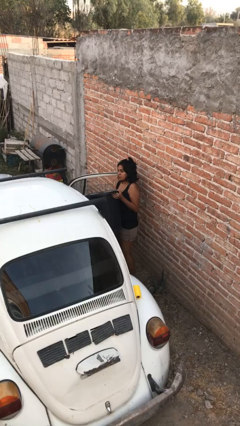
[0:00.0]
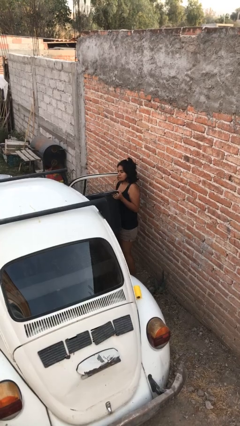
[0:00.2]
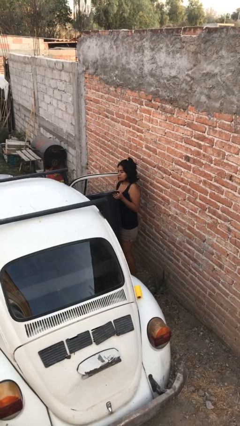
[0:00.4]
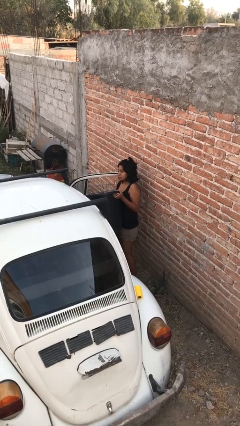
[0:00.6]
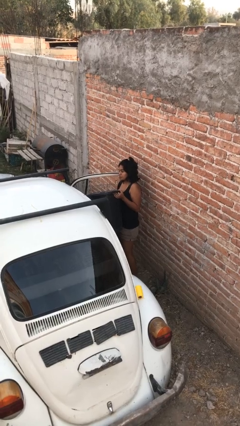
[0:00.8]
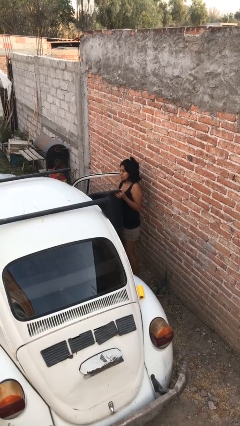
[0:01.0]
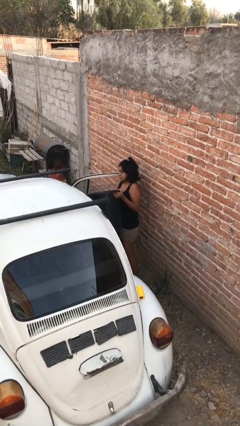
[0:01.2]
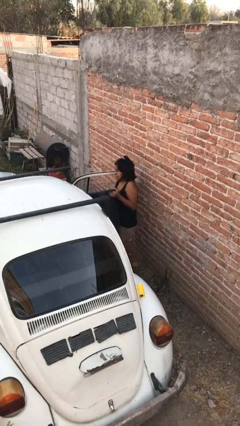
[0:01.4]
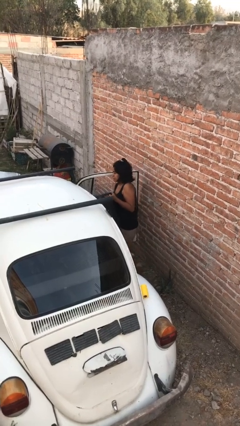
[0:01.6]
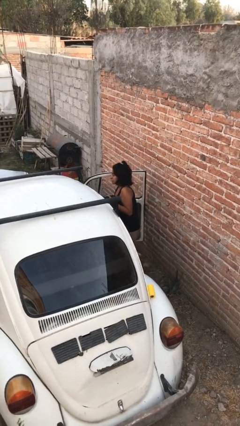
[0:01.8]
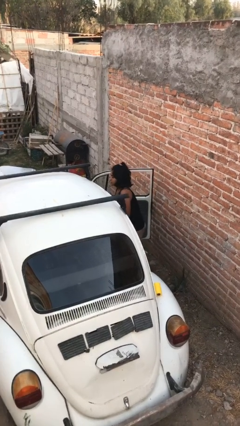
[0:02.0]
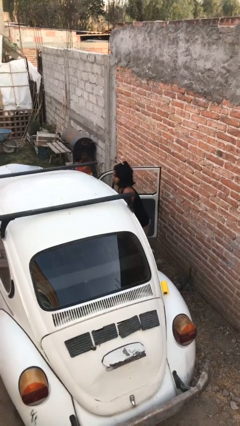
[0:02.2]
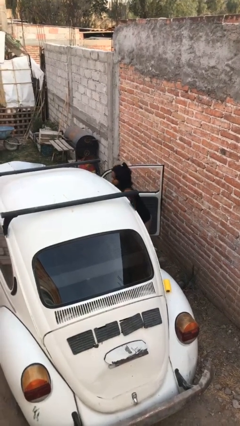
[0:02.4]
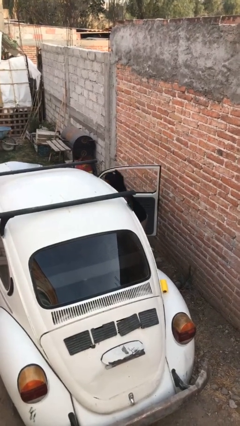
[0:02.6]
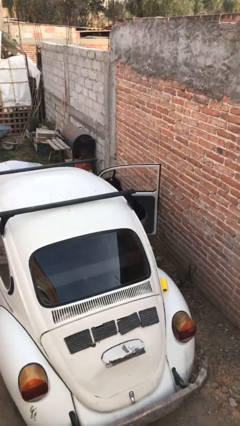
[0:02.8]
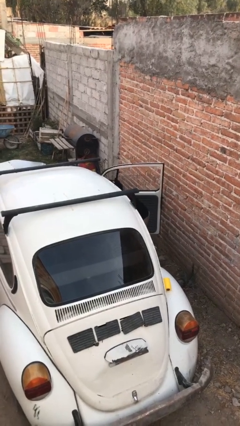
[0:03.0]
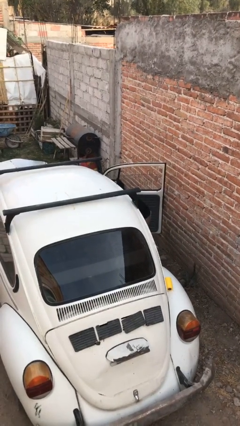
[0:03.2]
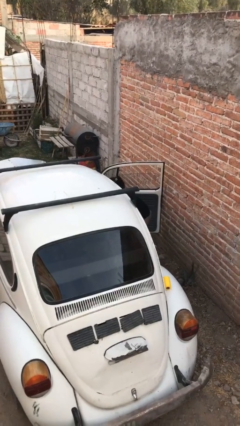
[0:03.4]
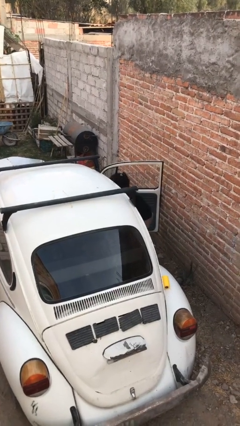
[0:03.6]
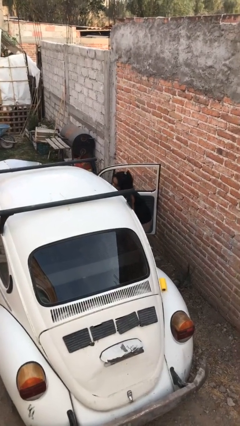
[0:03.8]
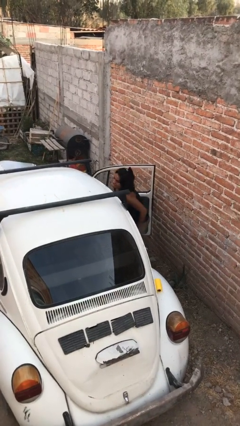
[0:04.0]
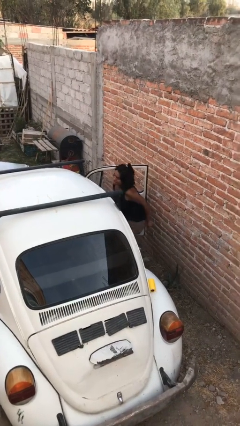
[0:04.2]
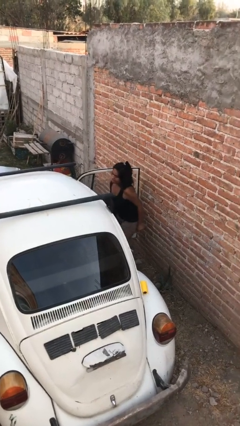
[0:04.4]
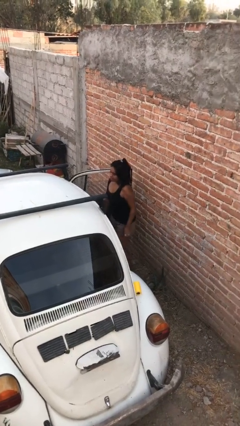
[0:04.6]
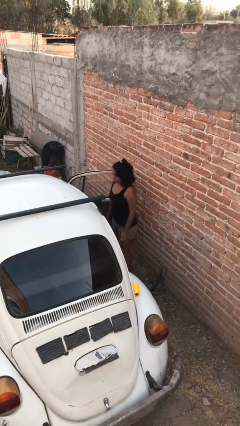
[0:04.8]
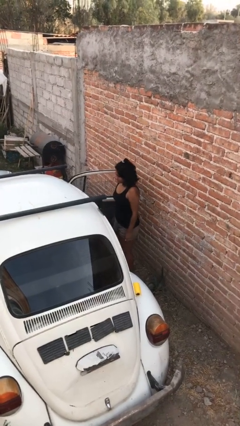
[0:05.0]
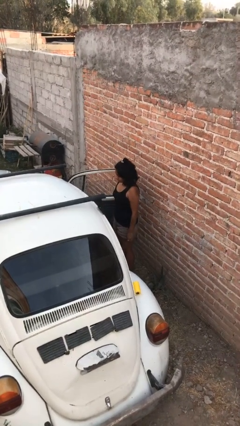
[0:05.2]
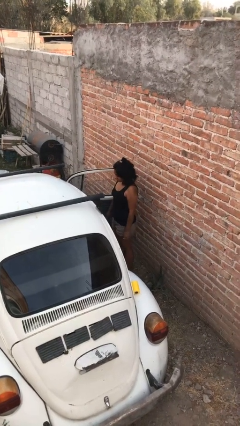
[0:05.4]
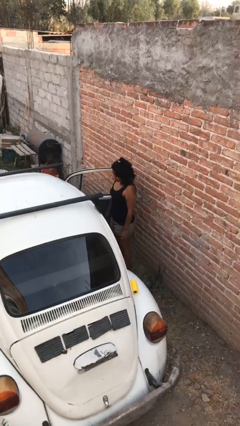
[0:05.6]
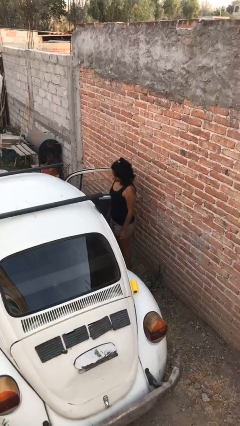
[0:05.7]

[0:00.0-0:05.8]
person loads car

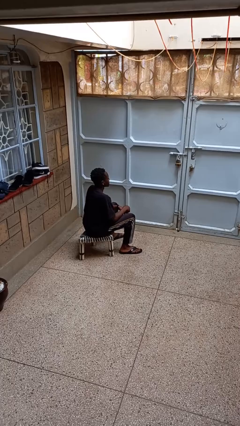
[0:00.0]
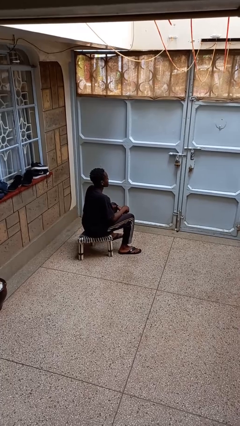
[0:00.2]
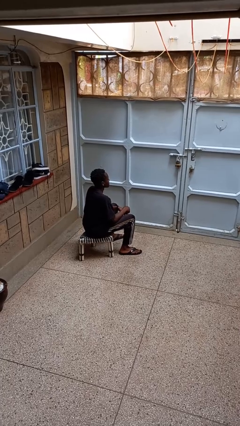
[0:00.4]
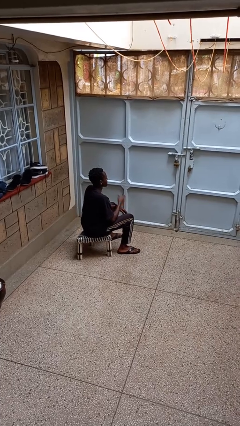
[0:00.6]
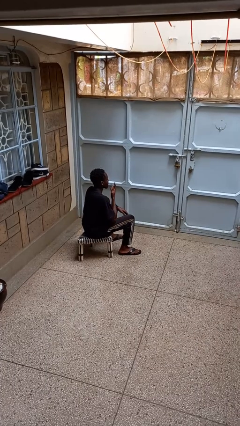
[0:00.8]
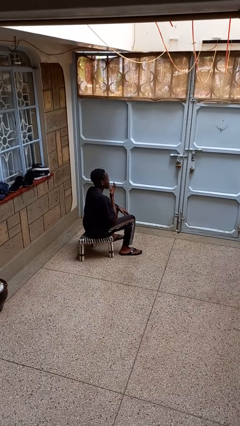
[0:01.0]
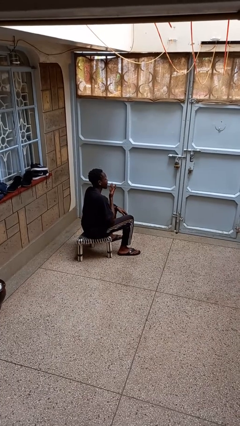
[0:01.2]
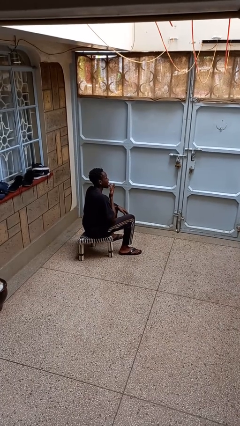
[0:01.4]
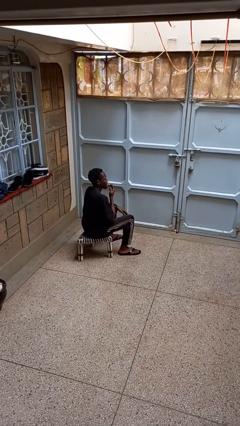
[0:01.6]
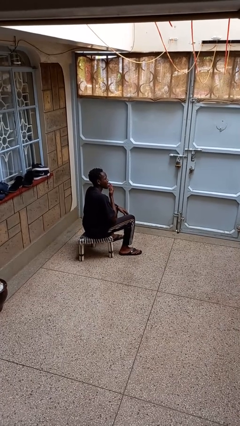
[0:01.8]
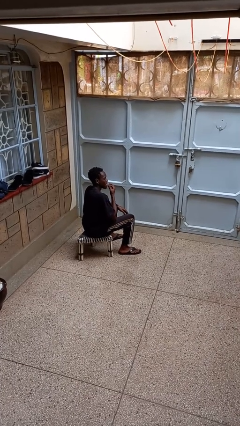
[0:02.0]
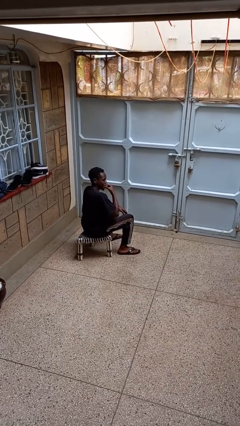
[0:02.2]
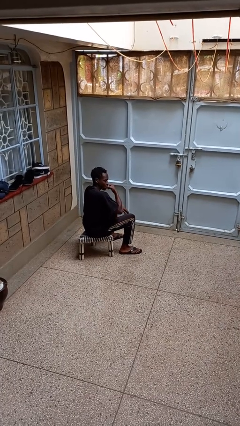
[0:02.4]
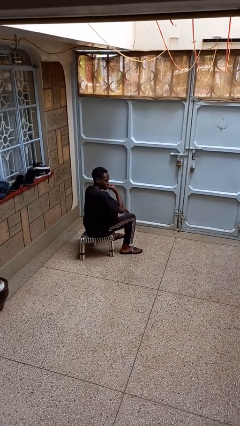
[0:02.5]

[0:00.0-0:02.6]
person licks fingers

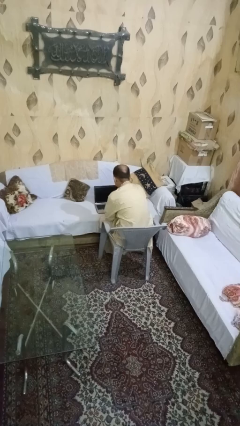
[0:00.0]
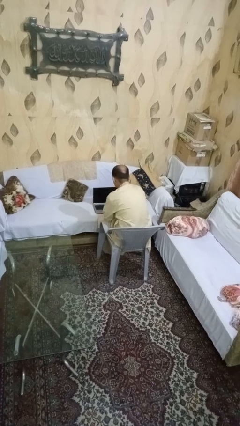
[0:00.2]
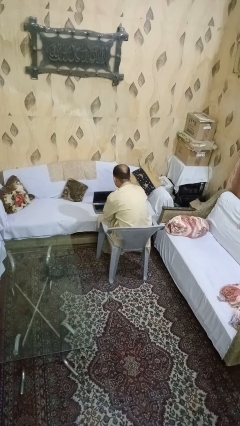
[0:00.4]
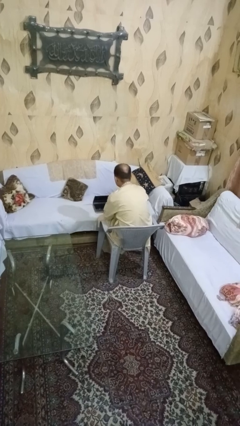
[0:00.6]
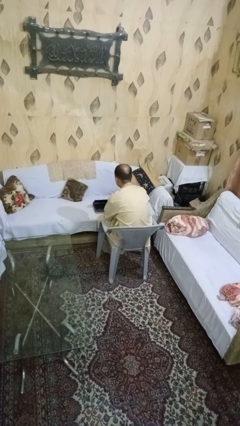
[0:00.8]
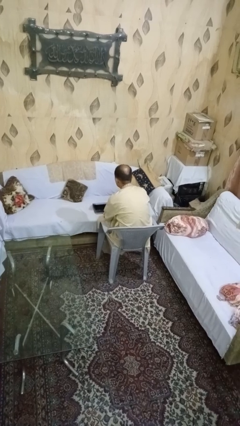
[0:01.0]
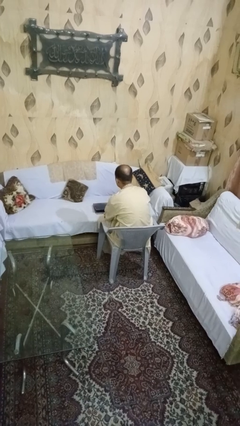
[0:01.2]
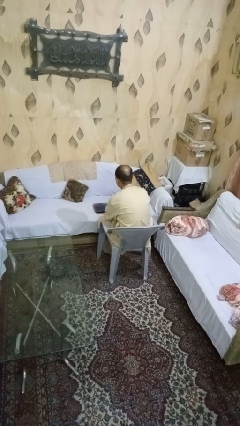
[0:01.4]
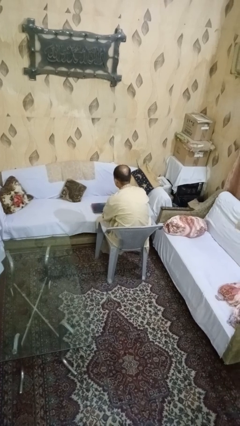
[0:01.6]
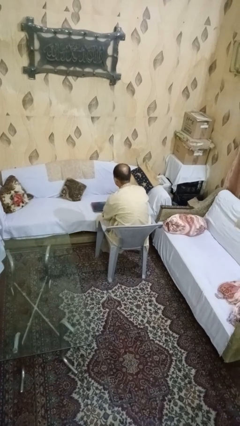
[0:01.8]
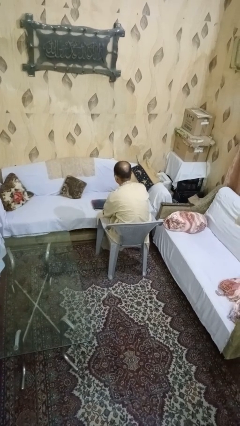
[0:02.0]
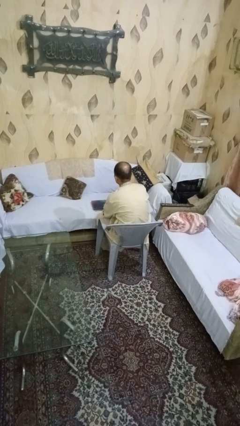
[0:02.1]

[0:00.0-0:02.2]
person closes laptop

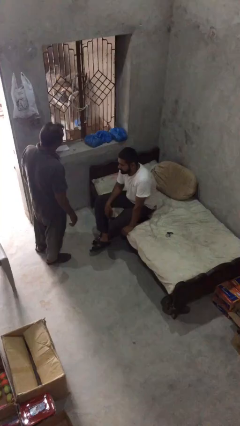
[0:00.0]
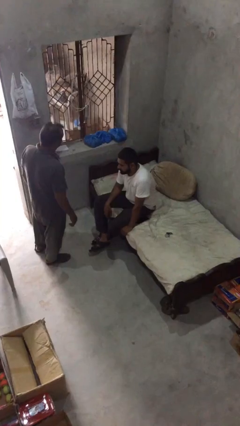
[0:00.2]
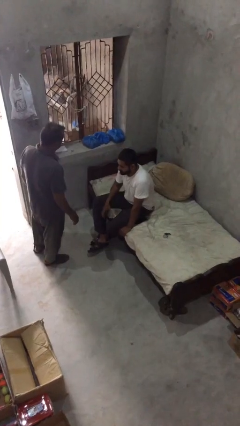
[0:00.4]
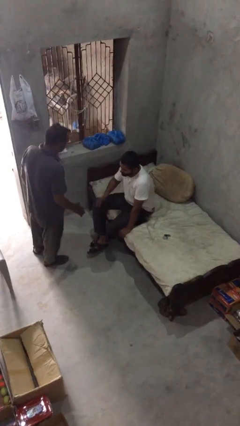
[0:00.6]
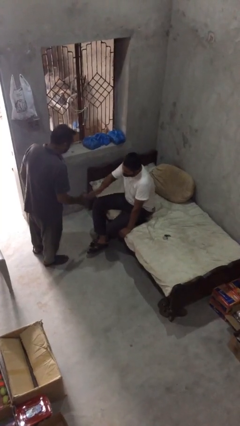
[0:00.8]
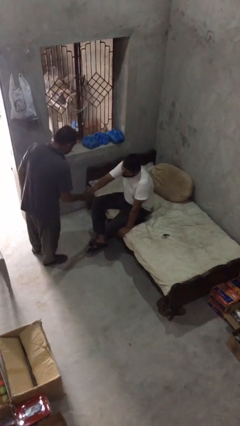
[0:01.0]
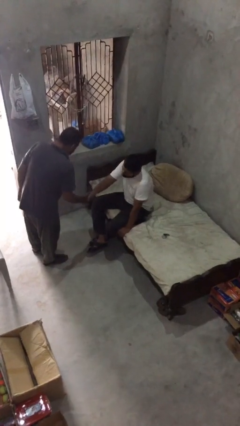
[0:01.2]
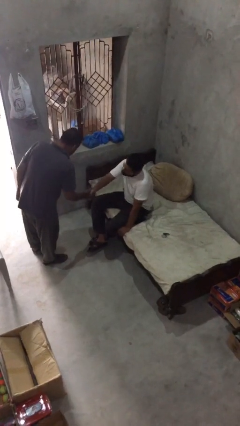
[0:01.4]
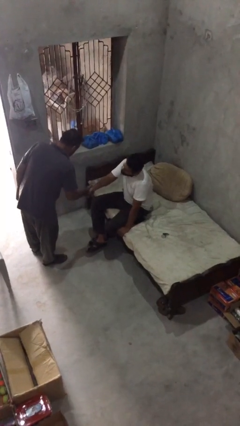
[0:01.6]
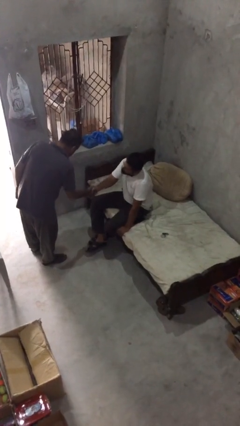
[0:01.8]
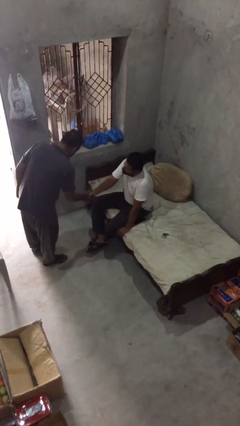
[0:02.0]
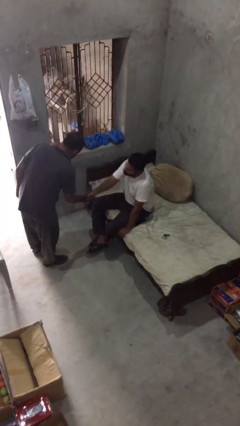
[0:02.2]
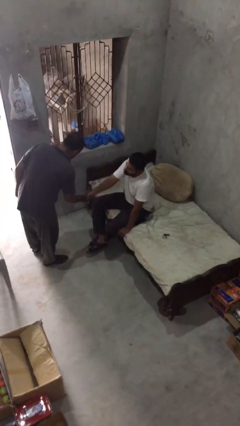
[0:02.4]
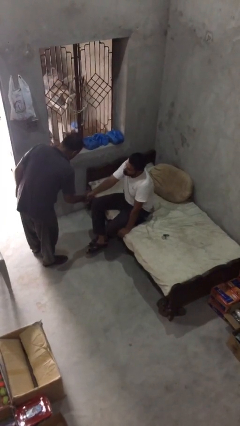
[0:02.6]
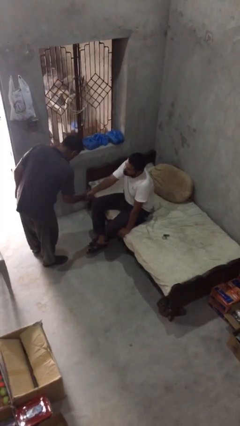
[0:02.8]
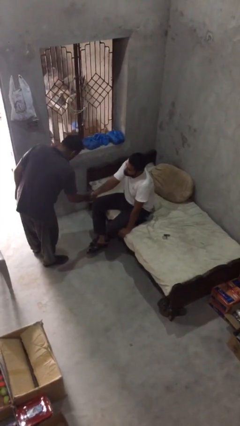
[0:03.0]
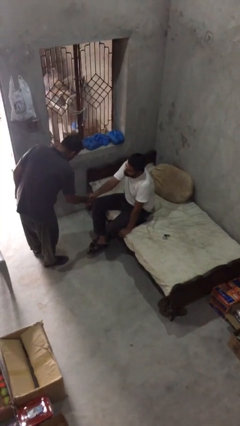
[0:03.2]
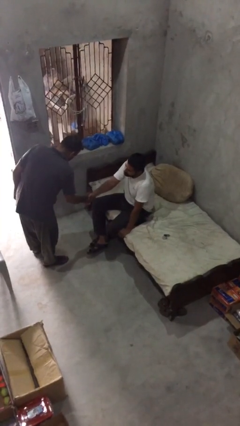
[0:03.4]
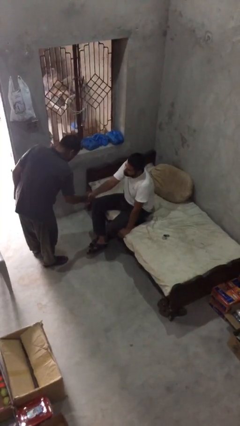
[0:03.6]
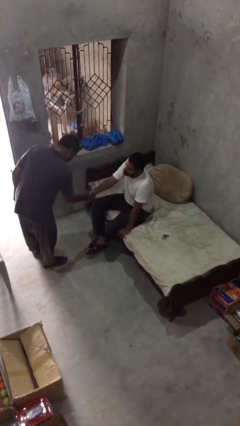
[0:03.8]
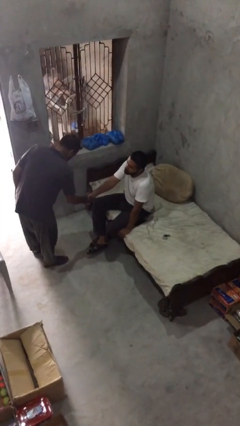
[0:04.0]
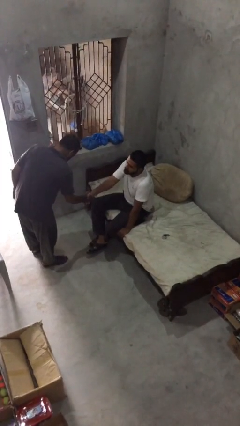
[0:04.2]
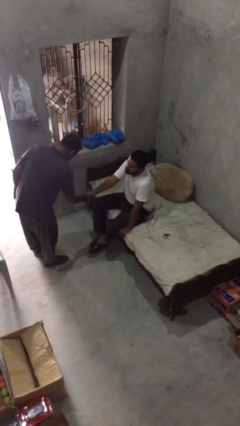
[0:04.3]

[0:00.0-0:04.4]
person shakes hand

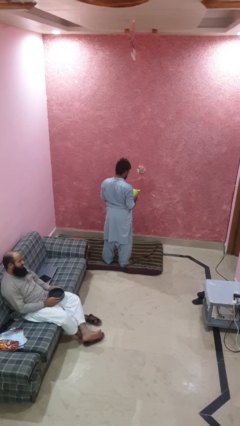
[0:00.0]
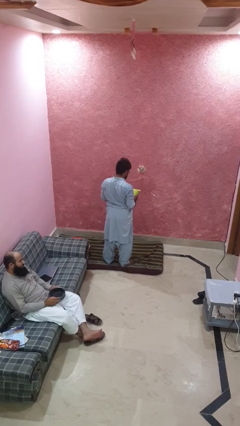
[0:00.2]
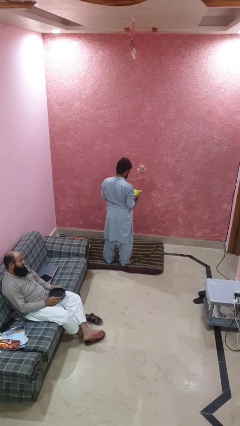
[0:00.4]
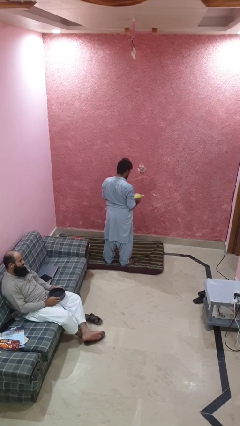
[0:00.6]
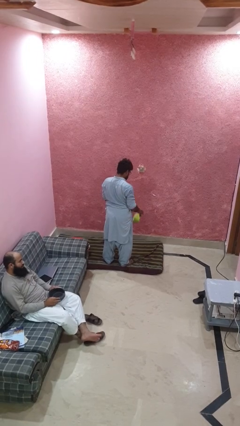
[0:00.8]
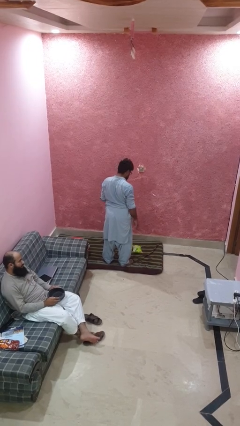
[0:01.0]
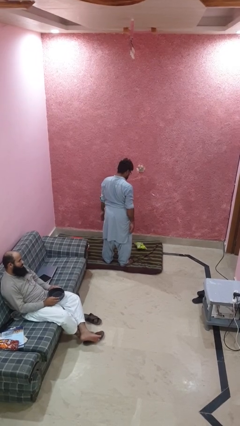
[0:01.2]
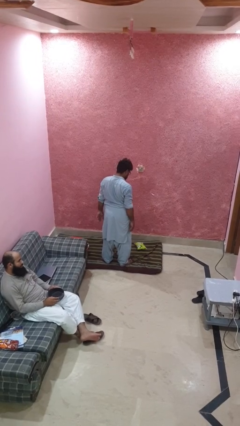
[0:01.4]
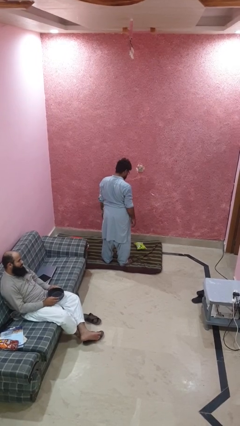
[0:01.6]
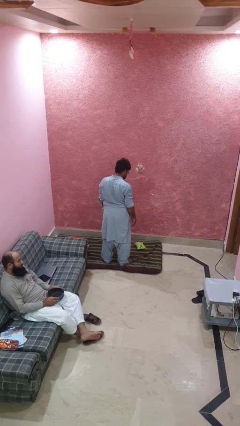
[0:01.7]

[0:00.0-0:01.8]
person drops object

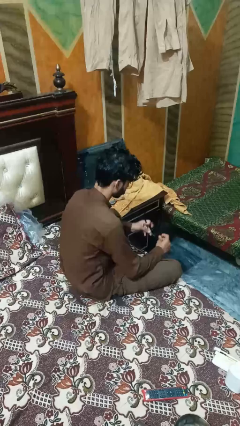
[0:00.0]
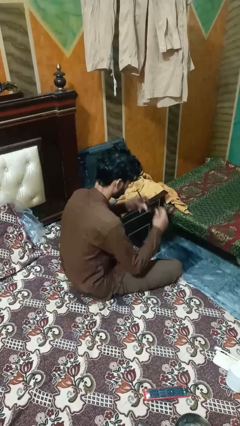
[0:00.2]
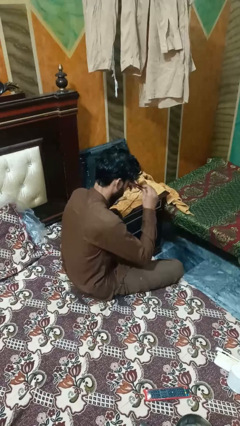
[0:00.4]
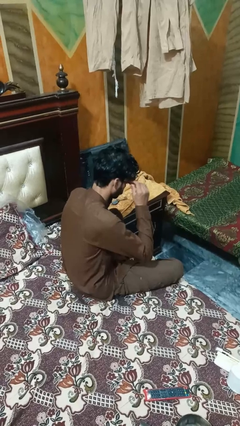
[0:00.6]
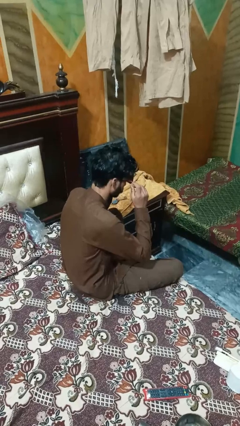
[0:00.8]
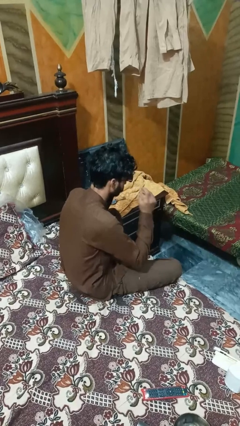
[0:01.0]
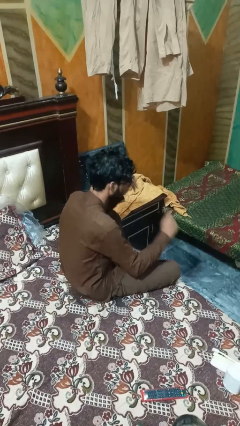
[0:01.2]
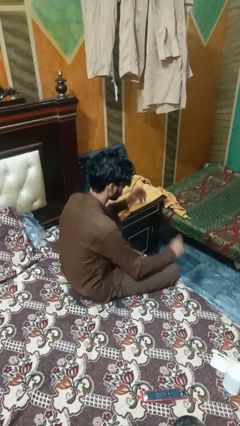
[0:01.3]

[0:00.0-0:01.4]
person puts on sunglasses
